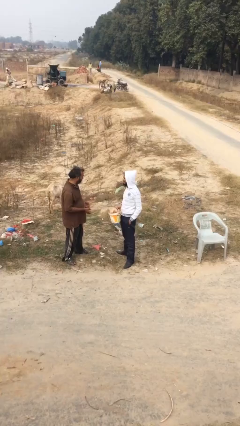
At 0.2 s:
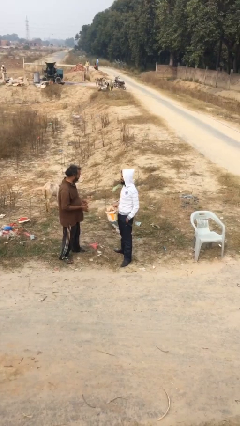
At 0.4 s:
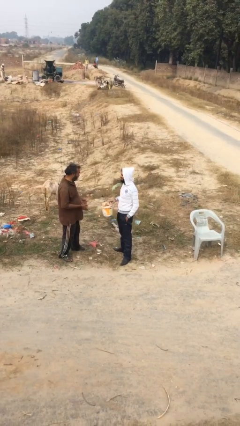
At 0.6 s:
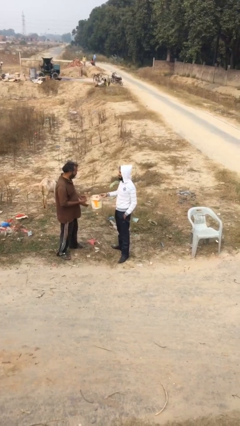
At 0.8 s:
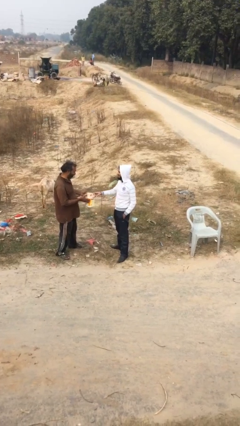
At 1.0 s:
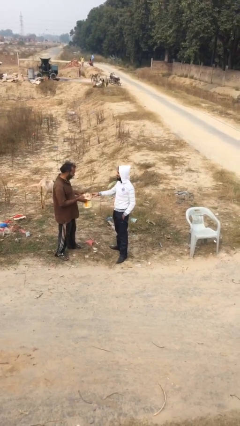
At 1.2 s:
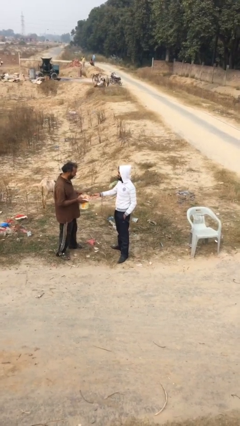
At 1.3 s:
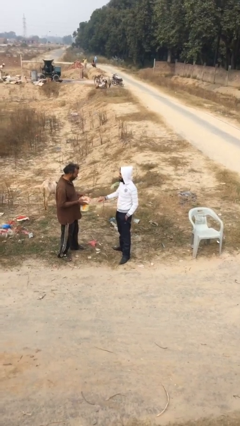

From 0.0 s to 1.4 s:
person transfers object to person

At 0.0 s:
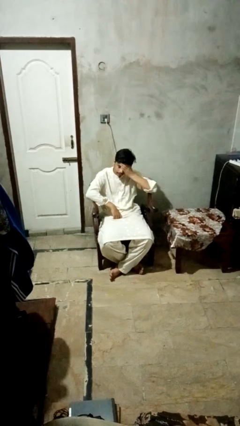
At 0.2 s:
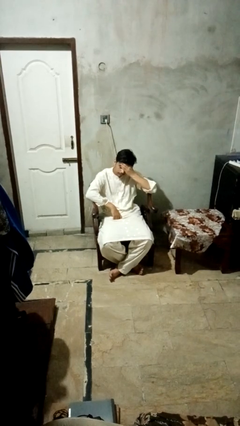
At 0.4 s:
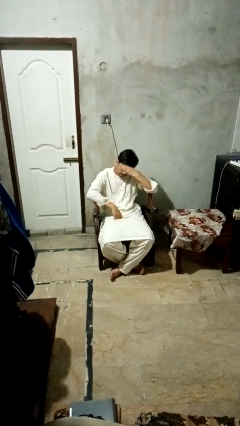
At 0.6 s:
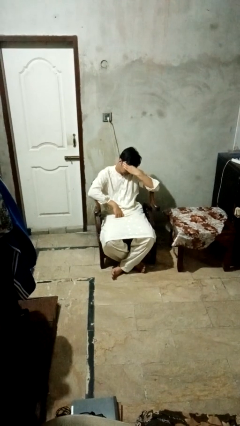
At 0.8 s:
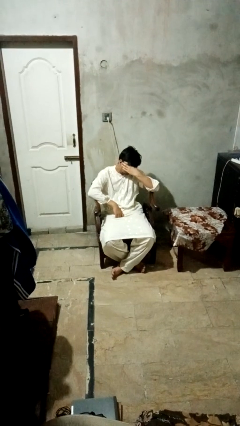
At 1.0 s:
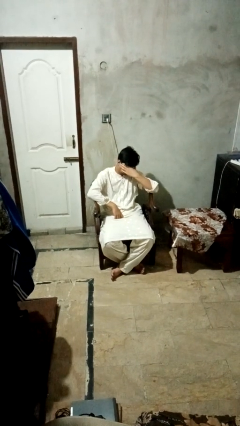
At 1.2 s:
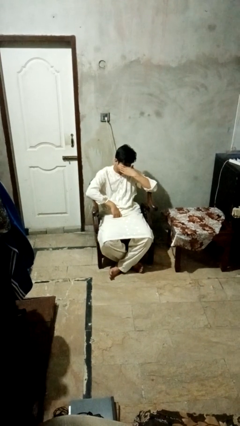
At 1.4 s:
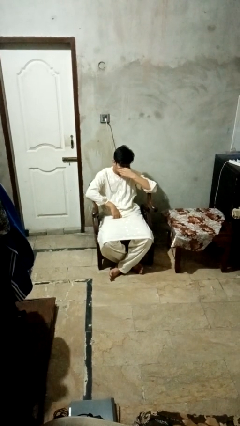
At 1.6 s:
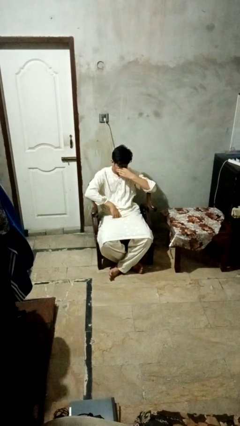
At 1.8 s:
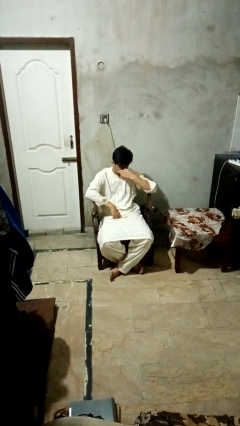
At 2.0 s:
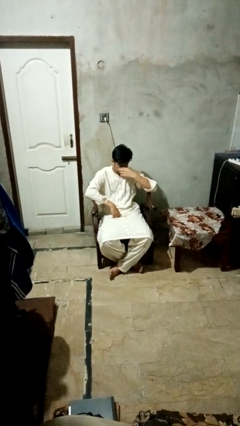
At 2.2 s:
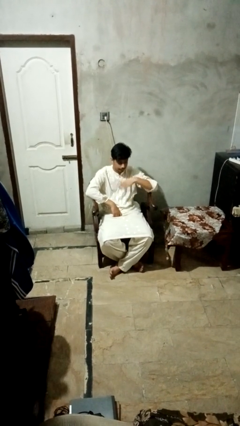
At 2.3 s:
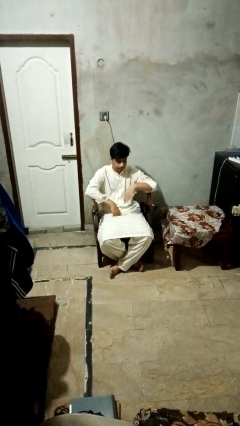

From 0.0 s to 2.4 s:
person covers face with hands

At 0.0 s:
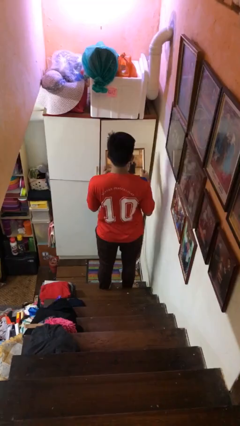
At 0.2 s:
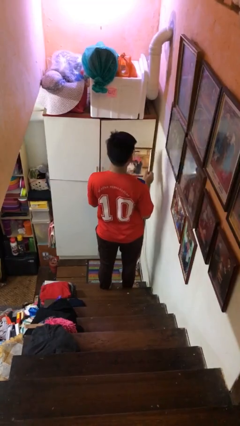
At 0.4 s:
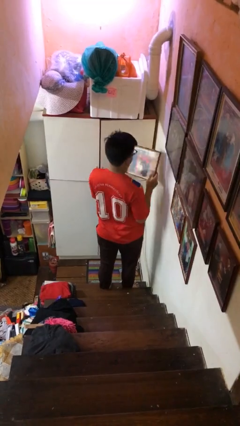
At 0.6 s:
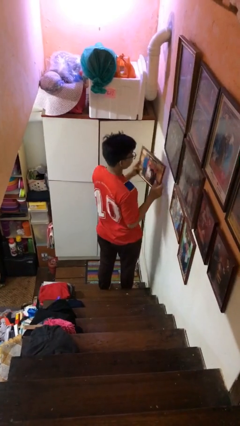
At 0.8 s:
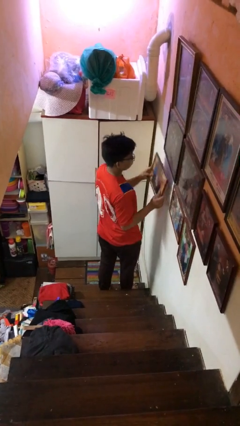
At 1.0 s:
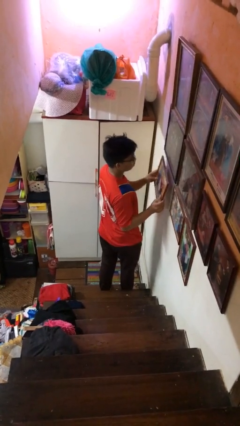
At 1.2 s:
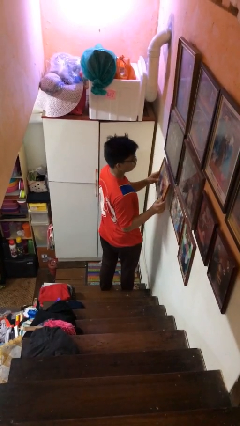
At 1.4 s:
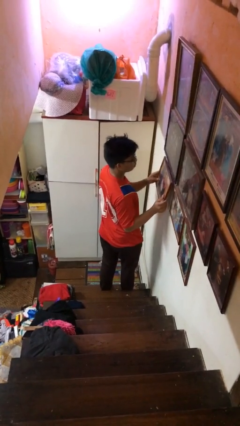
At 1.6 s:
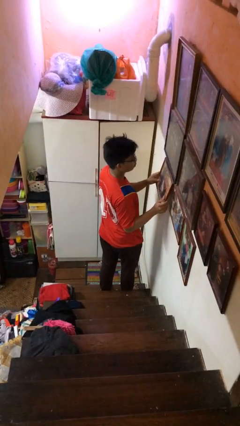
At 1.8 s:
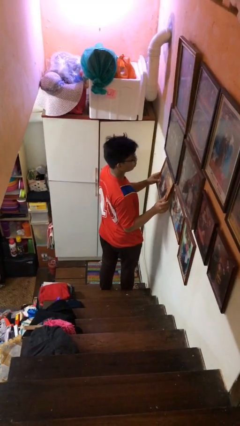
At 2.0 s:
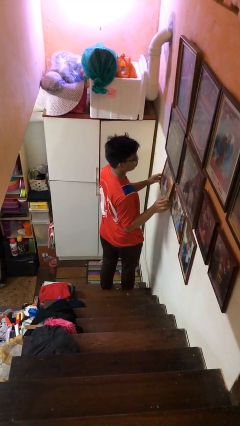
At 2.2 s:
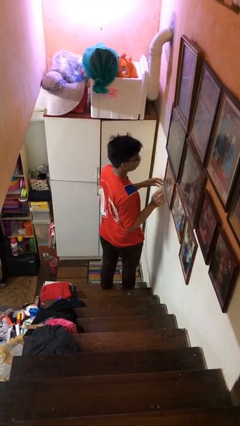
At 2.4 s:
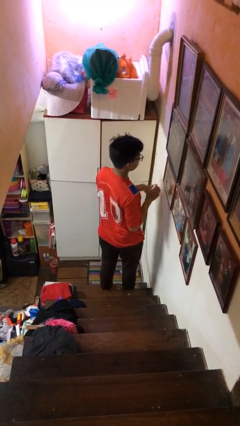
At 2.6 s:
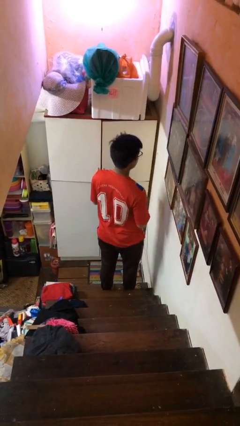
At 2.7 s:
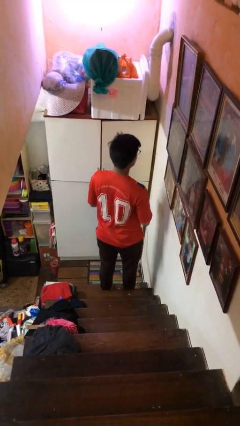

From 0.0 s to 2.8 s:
person puts up picture frame

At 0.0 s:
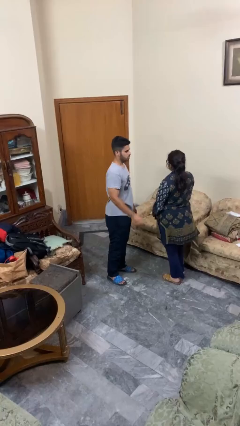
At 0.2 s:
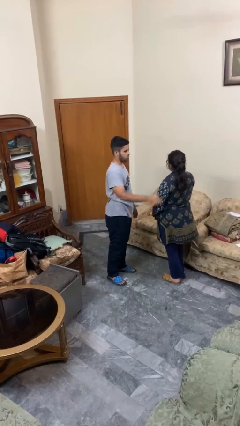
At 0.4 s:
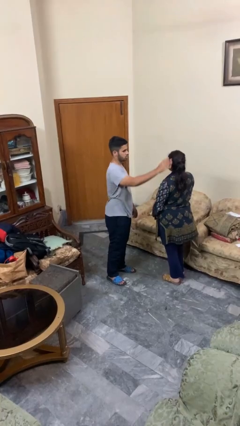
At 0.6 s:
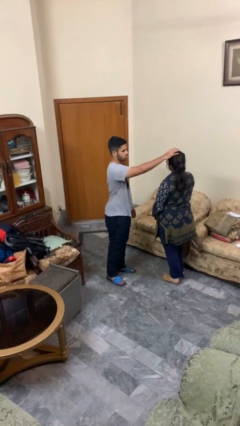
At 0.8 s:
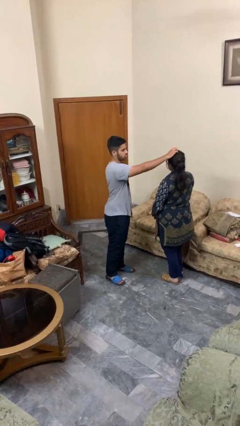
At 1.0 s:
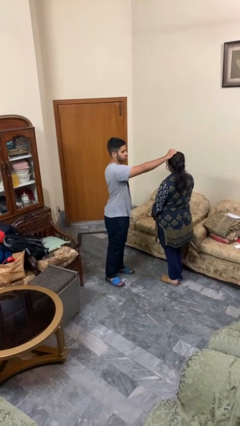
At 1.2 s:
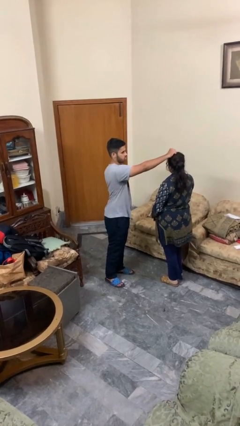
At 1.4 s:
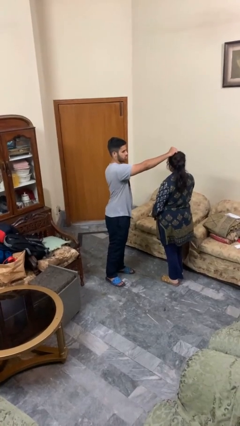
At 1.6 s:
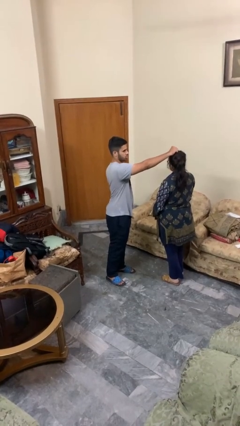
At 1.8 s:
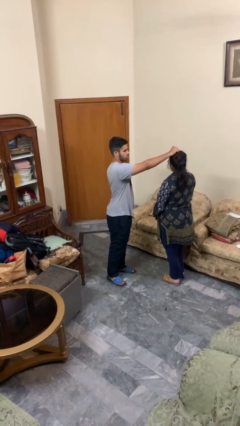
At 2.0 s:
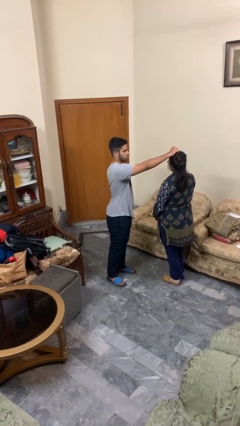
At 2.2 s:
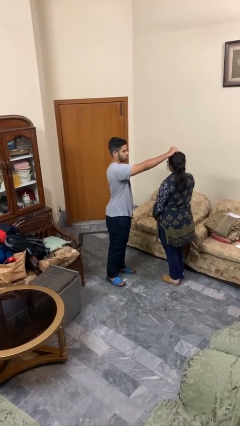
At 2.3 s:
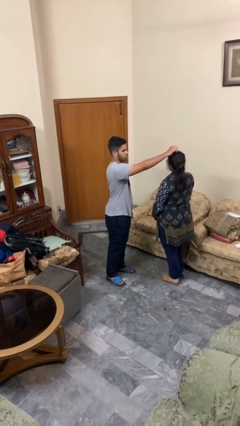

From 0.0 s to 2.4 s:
person grabs person by hair

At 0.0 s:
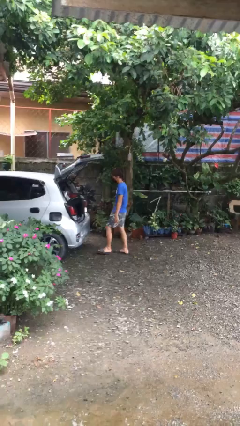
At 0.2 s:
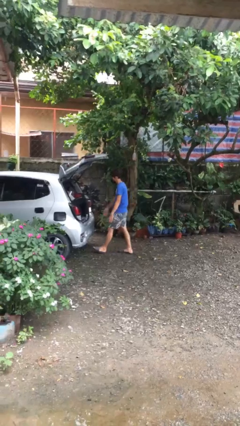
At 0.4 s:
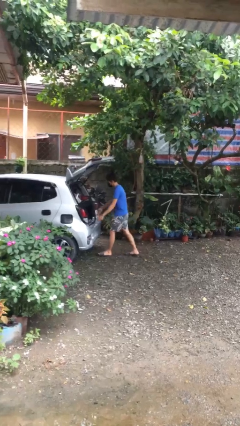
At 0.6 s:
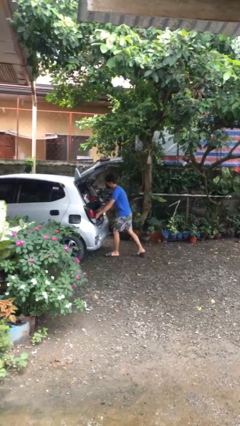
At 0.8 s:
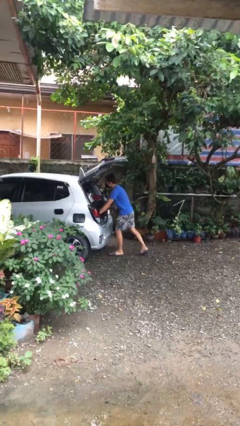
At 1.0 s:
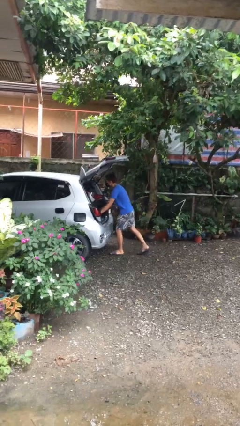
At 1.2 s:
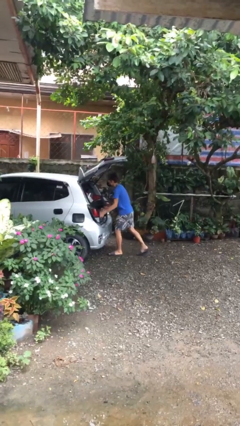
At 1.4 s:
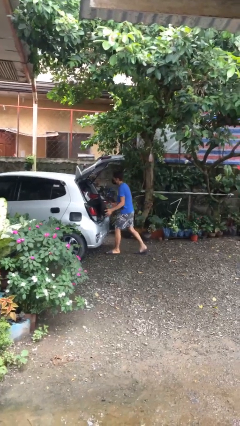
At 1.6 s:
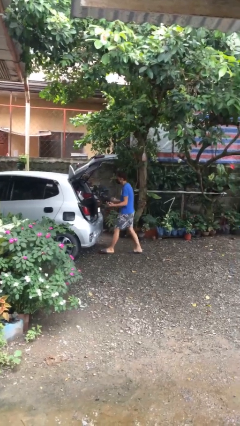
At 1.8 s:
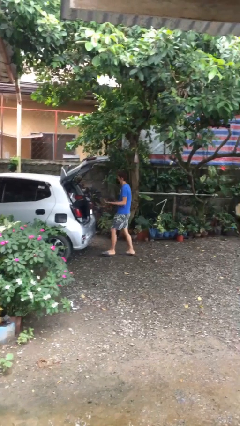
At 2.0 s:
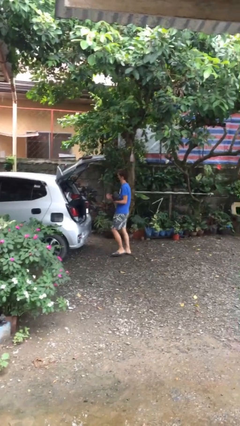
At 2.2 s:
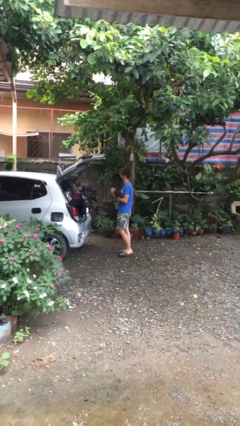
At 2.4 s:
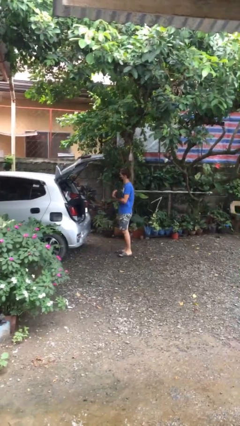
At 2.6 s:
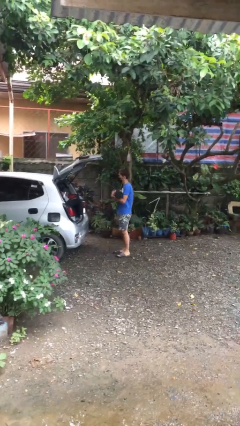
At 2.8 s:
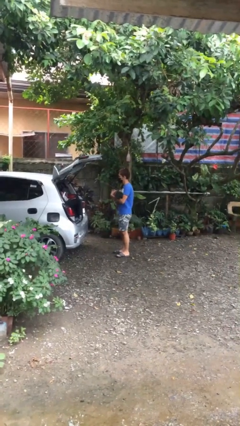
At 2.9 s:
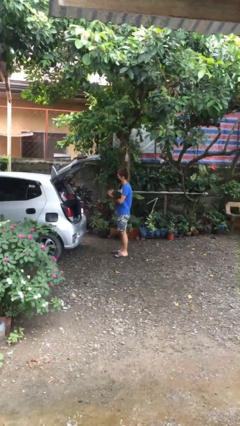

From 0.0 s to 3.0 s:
person unloads car

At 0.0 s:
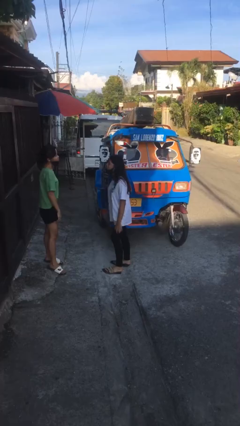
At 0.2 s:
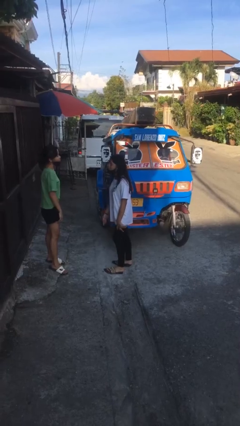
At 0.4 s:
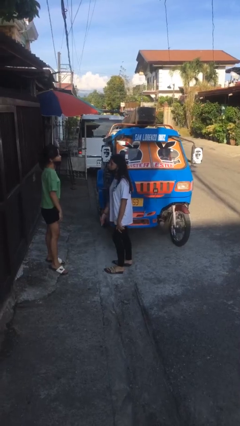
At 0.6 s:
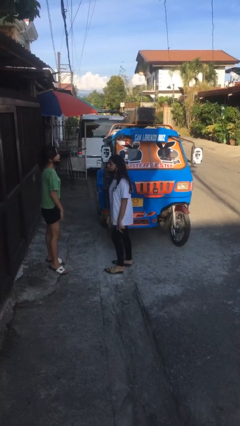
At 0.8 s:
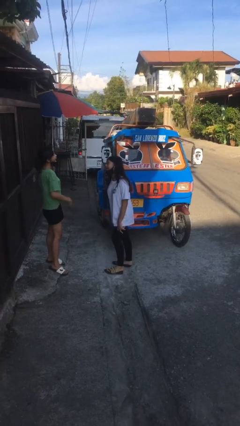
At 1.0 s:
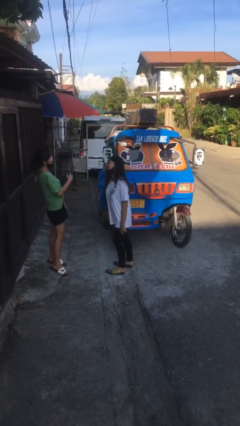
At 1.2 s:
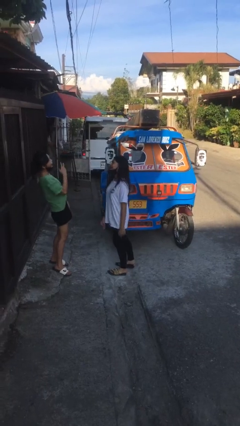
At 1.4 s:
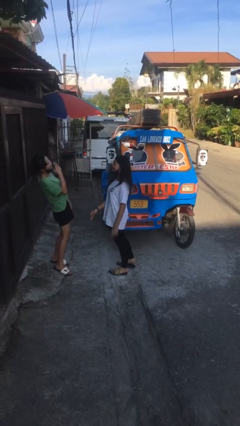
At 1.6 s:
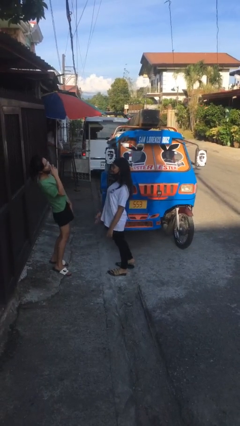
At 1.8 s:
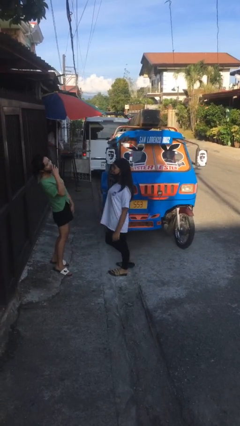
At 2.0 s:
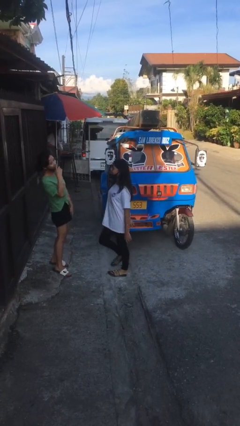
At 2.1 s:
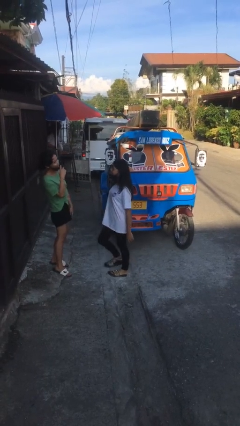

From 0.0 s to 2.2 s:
person laughs with person

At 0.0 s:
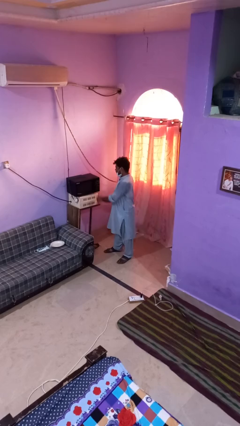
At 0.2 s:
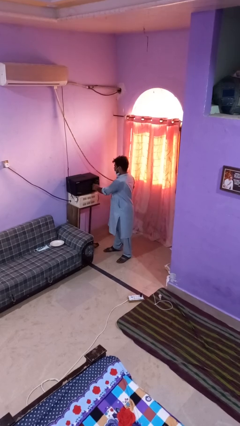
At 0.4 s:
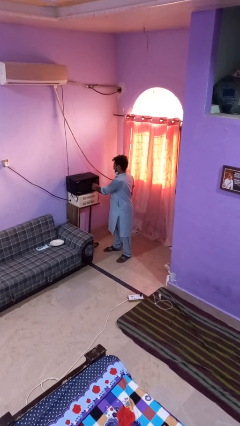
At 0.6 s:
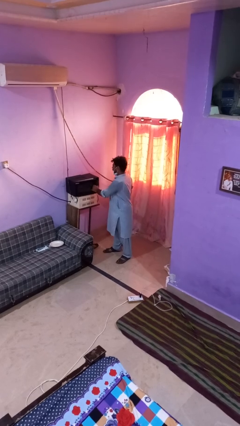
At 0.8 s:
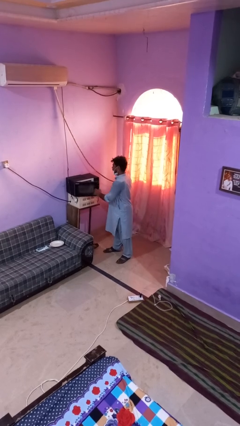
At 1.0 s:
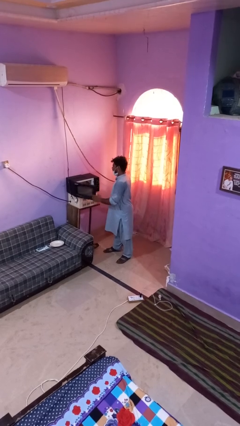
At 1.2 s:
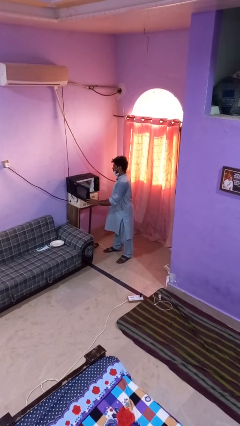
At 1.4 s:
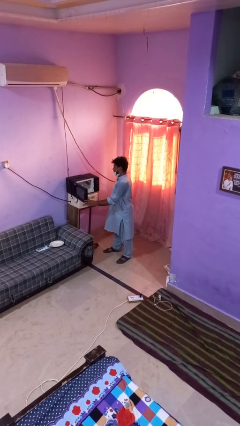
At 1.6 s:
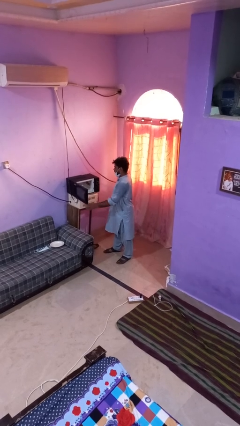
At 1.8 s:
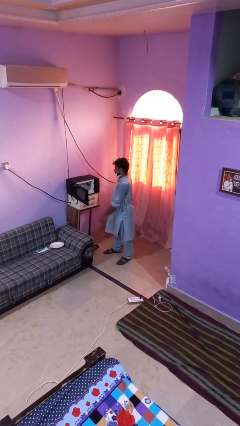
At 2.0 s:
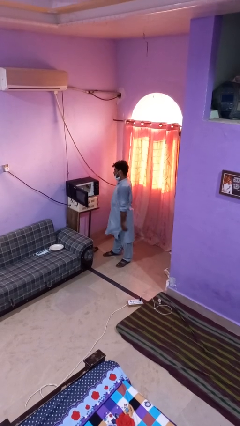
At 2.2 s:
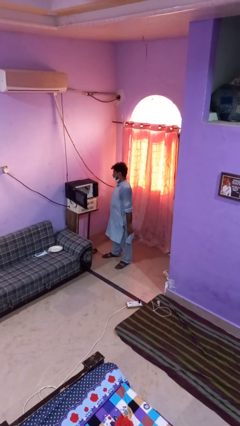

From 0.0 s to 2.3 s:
person opens oven door

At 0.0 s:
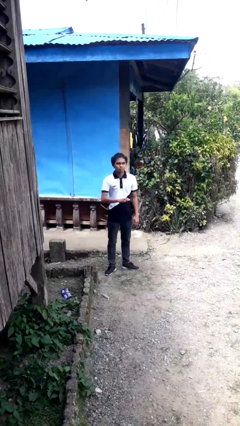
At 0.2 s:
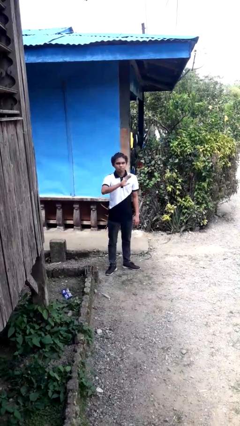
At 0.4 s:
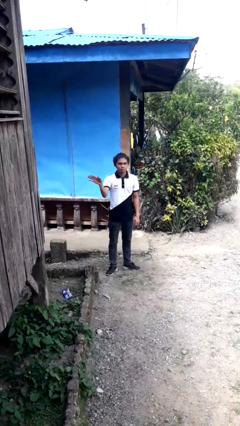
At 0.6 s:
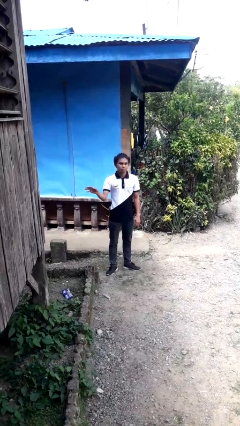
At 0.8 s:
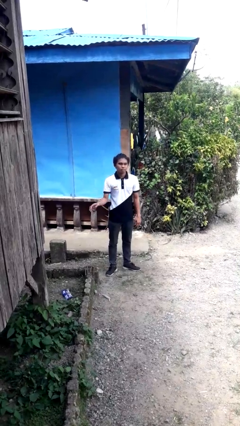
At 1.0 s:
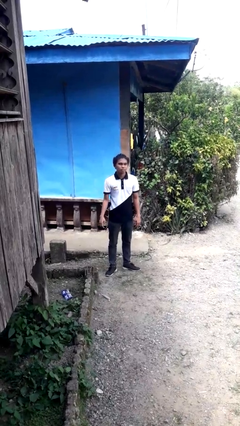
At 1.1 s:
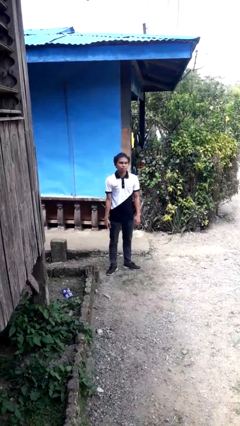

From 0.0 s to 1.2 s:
person gestures swipe right
